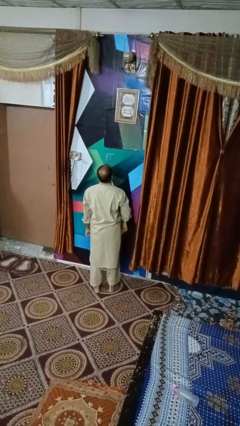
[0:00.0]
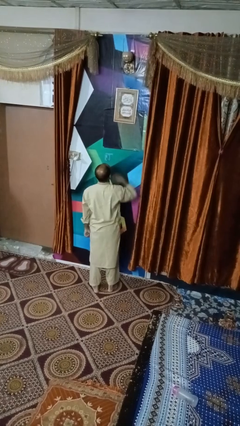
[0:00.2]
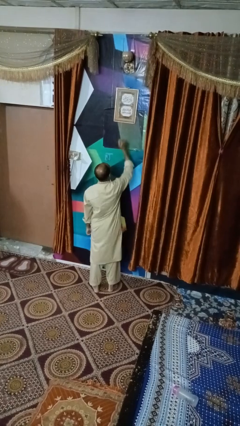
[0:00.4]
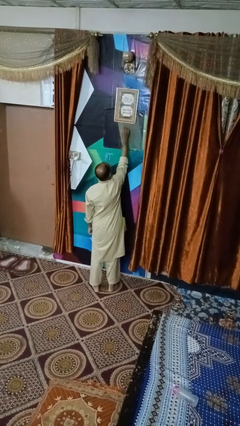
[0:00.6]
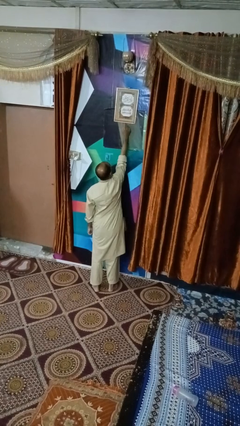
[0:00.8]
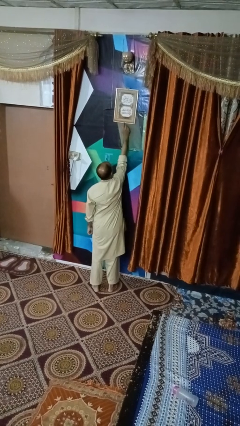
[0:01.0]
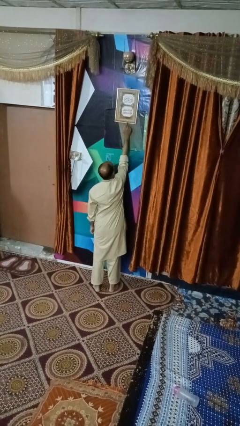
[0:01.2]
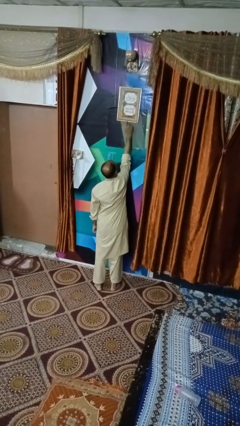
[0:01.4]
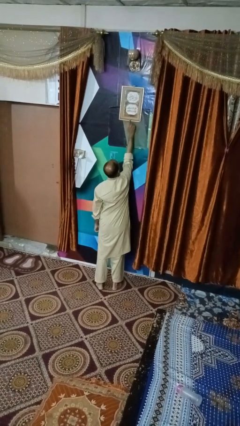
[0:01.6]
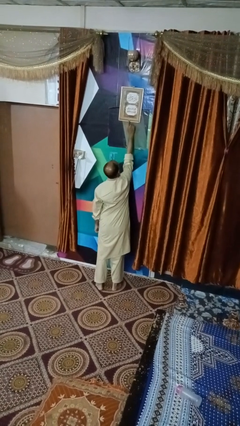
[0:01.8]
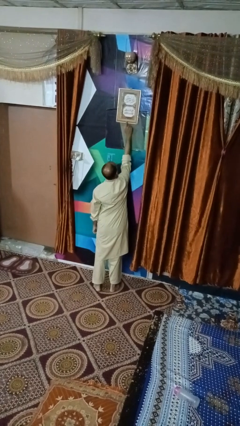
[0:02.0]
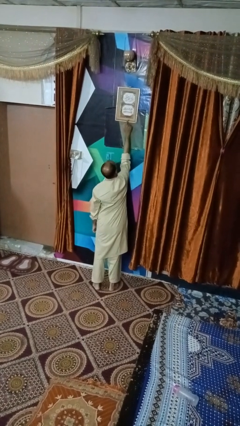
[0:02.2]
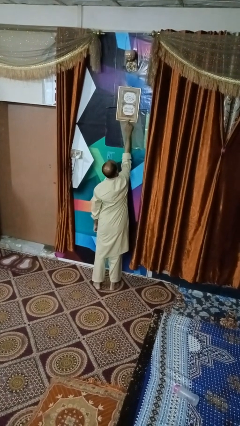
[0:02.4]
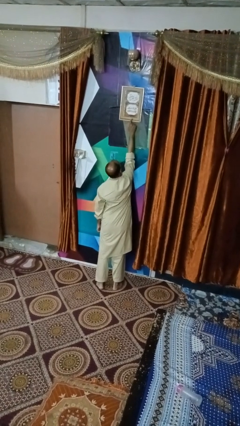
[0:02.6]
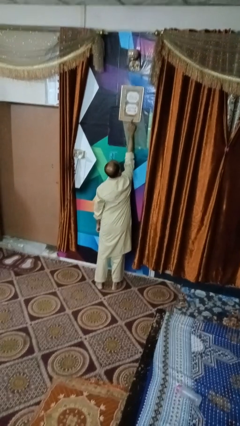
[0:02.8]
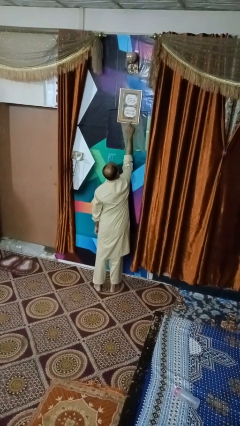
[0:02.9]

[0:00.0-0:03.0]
person taps object with finger

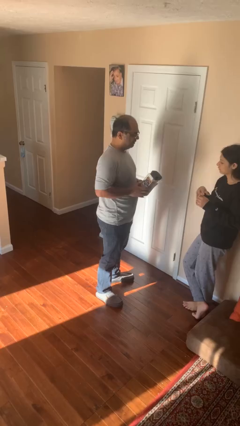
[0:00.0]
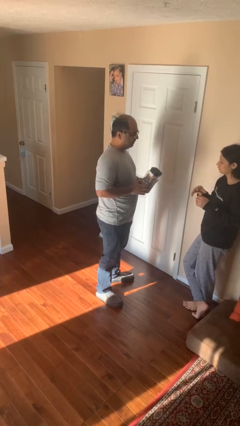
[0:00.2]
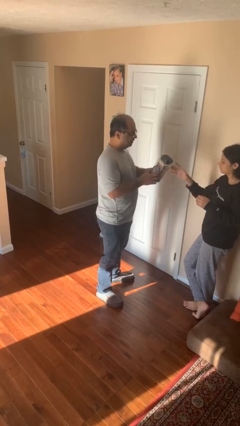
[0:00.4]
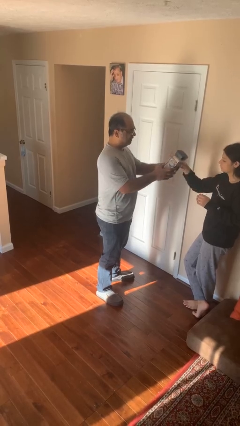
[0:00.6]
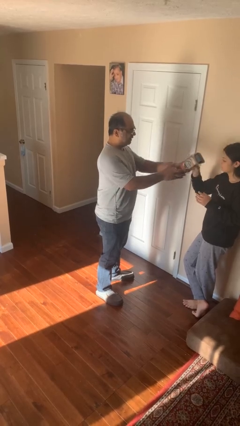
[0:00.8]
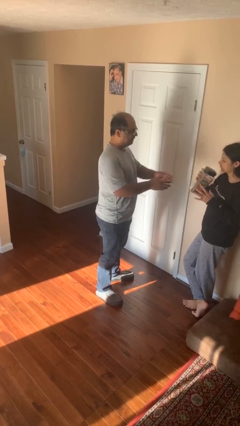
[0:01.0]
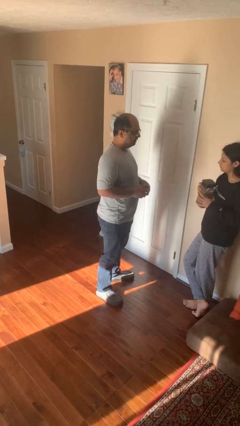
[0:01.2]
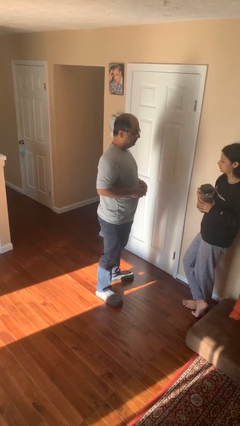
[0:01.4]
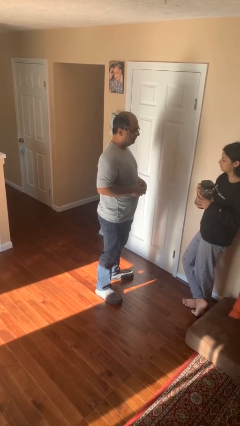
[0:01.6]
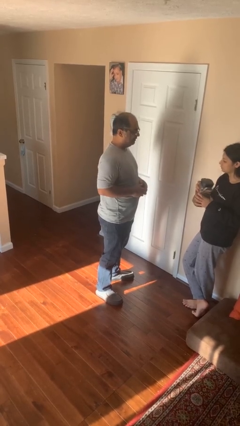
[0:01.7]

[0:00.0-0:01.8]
person transfers object to person

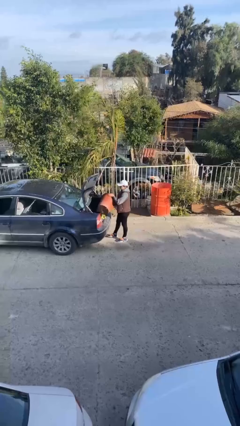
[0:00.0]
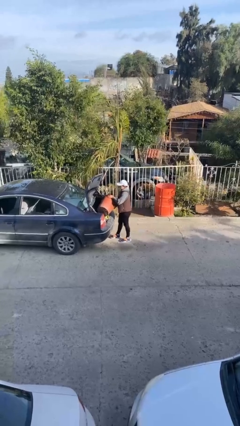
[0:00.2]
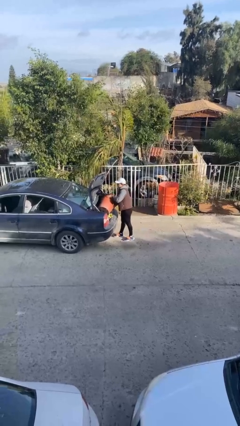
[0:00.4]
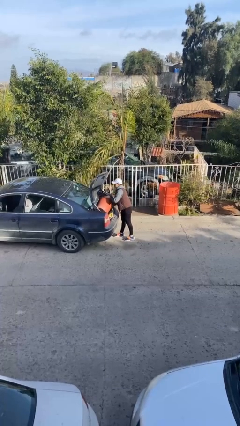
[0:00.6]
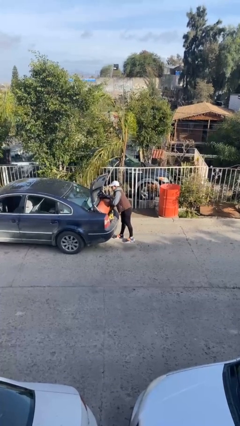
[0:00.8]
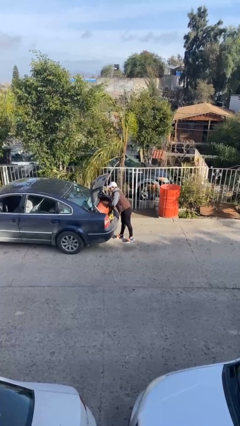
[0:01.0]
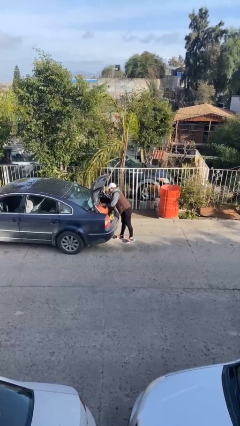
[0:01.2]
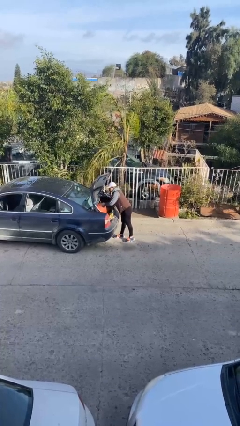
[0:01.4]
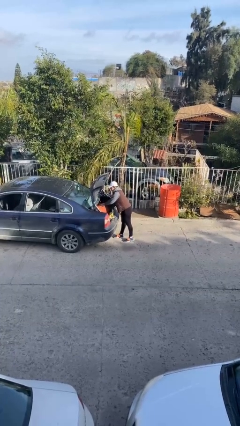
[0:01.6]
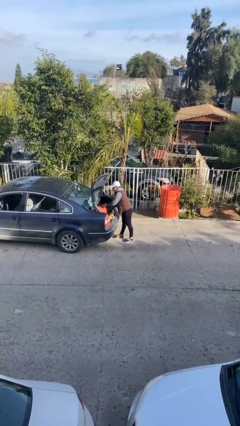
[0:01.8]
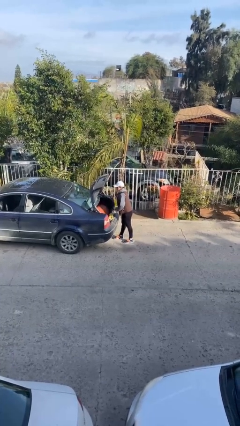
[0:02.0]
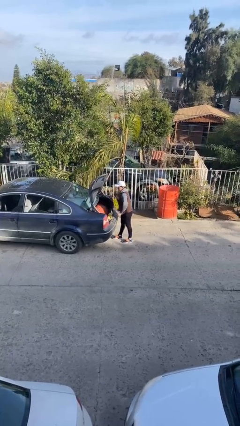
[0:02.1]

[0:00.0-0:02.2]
person loads car

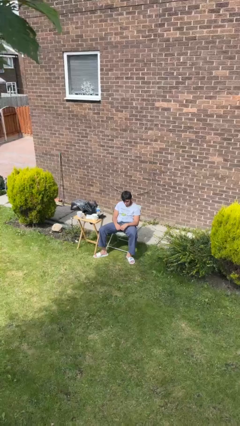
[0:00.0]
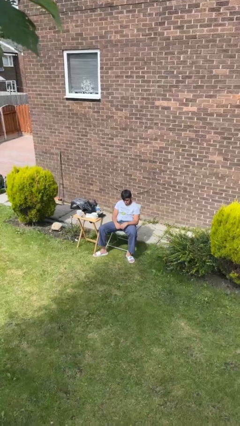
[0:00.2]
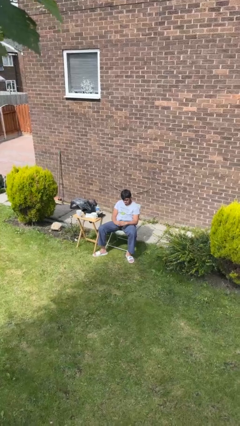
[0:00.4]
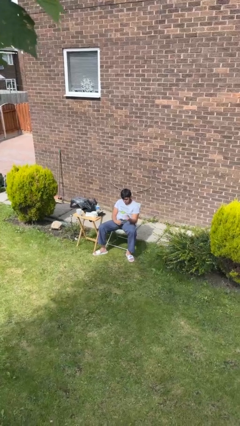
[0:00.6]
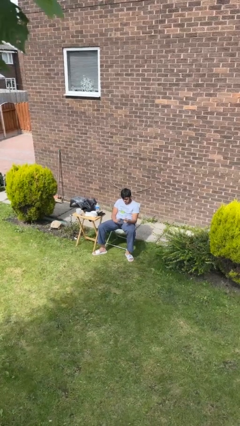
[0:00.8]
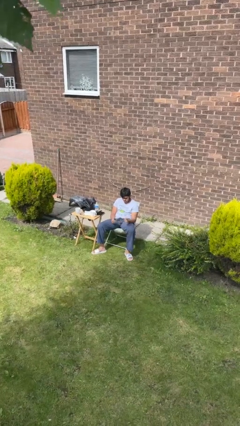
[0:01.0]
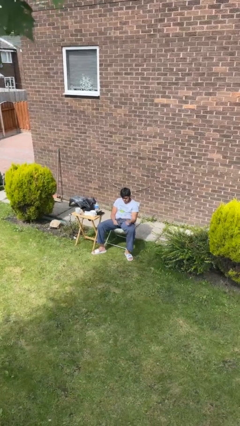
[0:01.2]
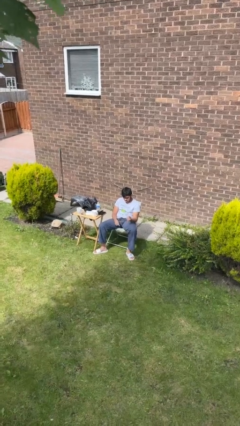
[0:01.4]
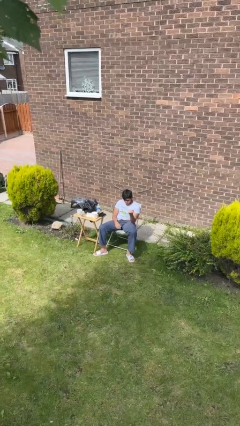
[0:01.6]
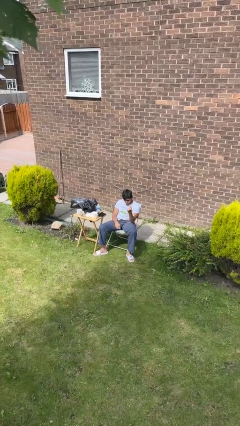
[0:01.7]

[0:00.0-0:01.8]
person snaps fingers

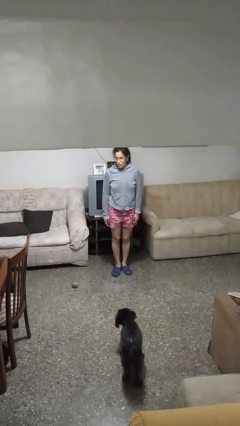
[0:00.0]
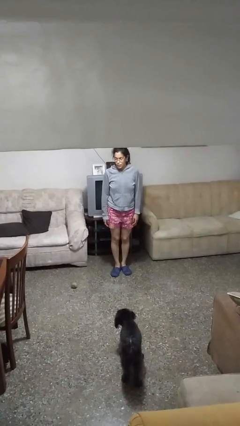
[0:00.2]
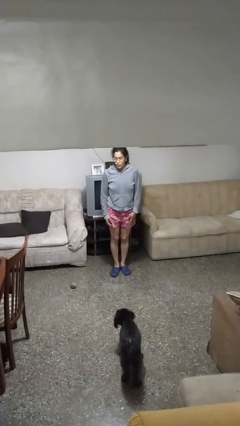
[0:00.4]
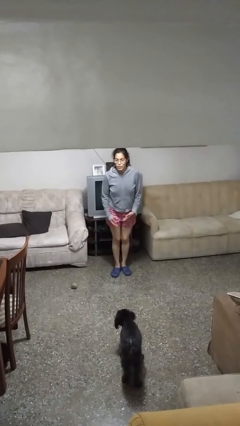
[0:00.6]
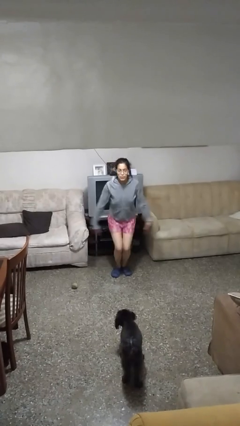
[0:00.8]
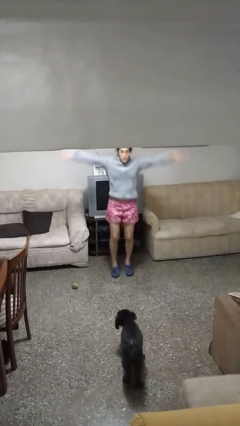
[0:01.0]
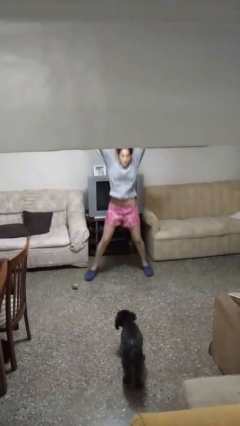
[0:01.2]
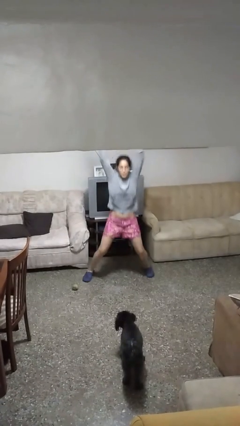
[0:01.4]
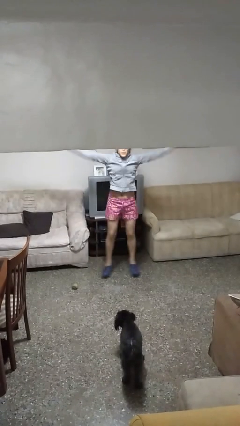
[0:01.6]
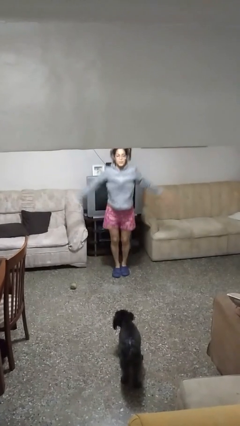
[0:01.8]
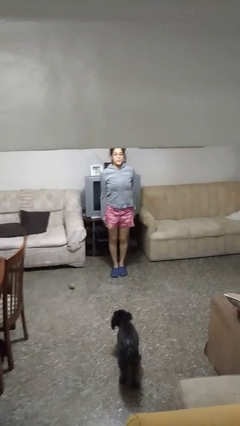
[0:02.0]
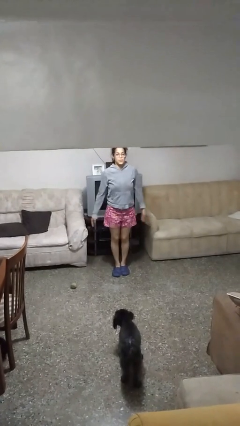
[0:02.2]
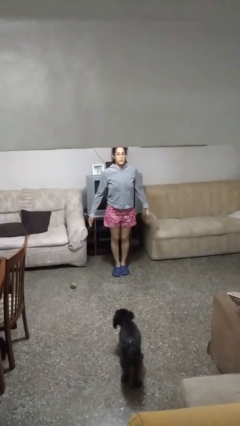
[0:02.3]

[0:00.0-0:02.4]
person exercises with jumping jacks

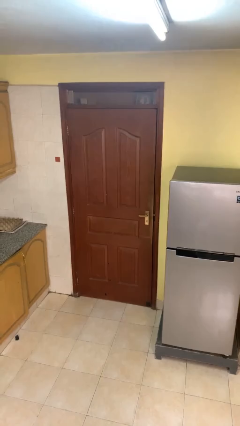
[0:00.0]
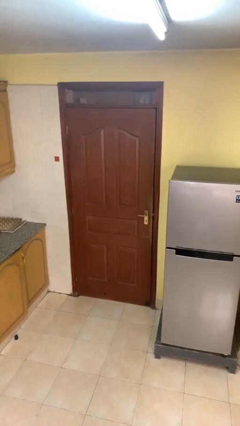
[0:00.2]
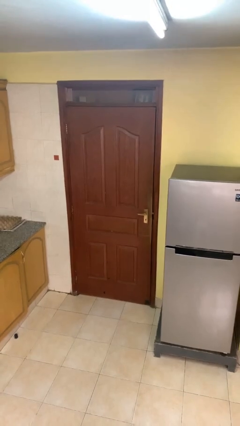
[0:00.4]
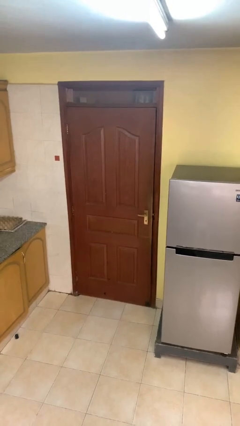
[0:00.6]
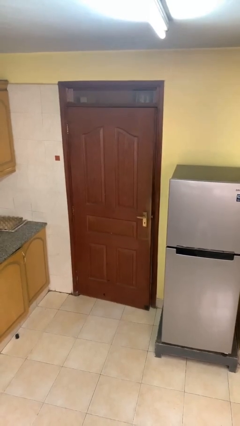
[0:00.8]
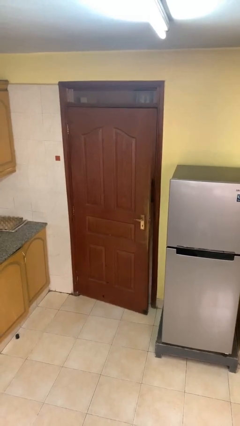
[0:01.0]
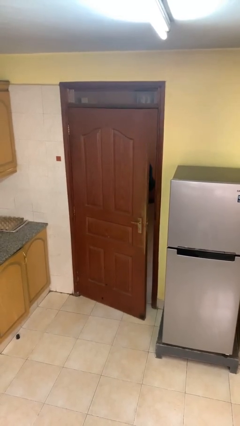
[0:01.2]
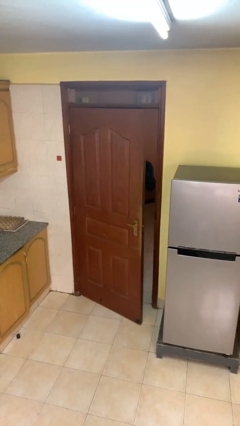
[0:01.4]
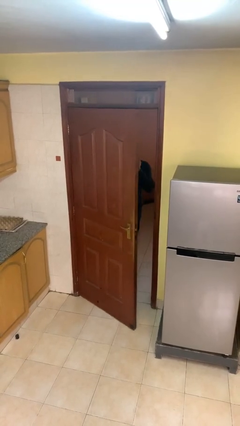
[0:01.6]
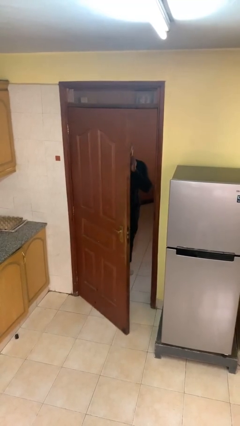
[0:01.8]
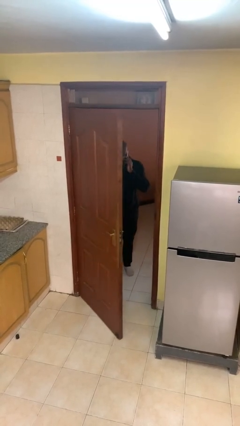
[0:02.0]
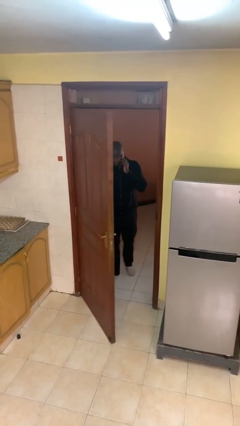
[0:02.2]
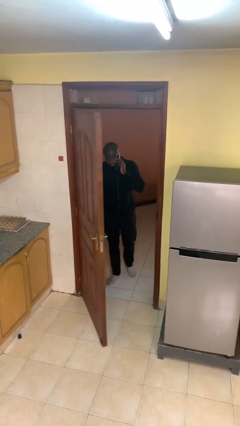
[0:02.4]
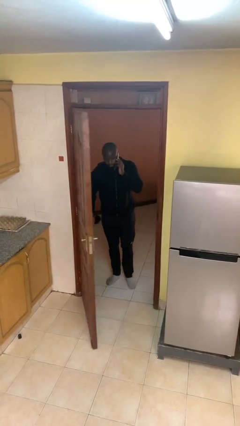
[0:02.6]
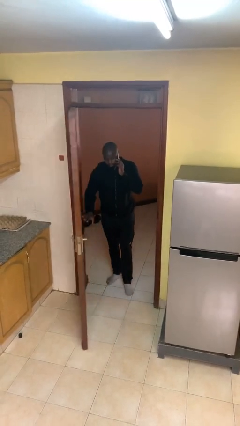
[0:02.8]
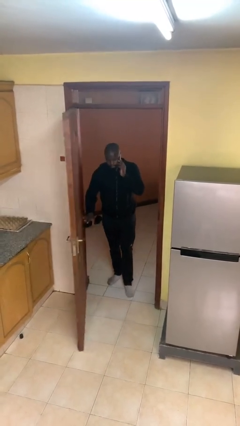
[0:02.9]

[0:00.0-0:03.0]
person opens facility door

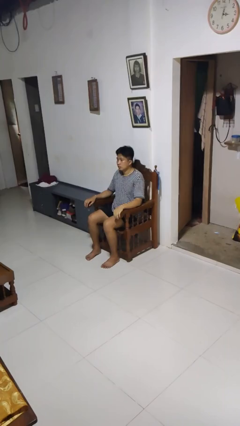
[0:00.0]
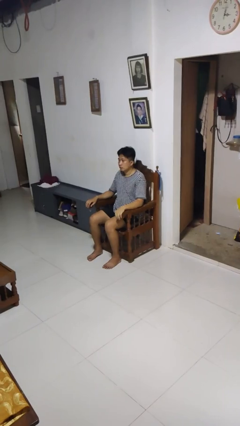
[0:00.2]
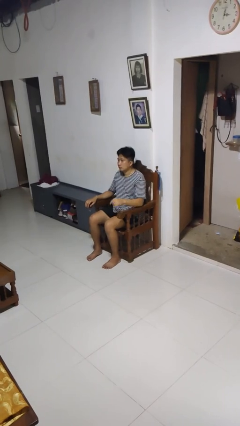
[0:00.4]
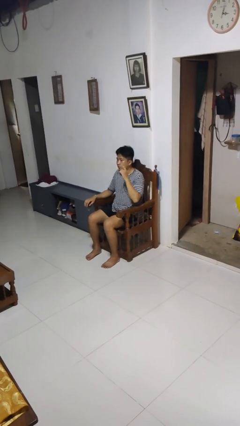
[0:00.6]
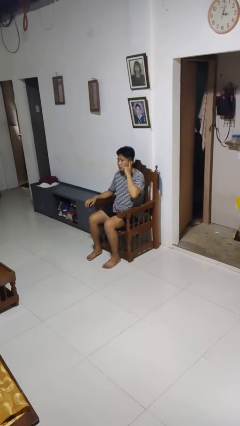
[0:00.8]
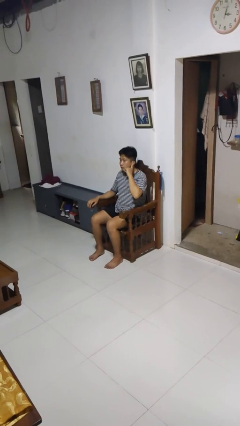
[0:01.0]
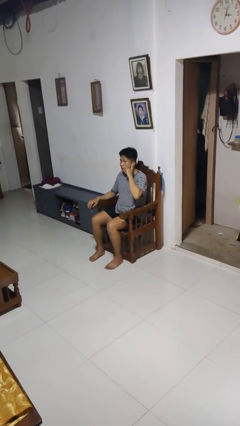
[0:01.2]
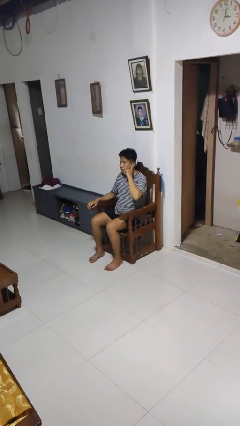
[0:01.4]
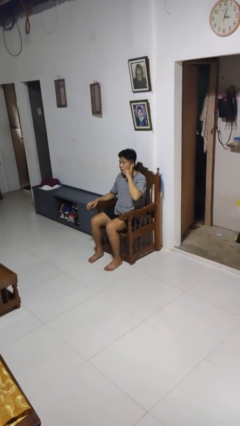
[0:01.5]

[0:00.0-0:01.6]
person gestures listen closely

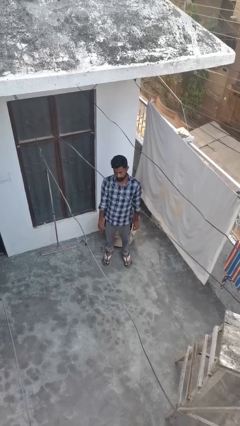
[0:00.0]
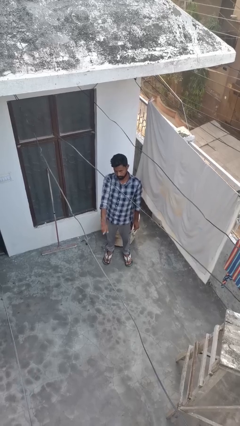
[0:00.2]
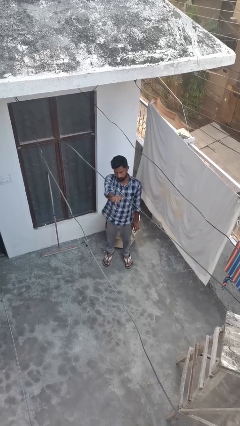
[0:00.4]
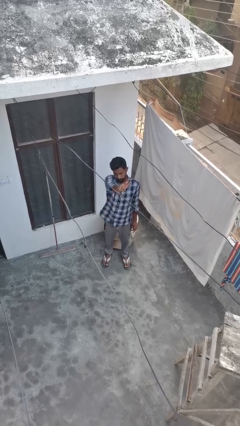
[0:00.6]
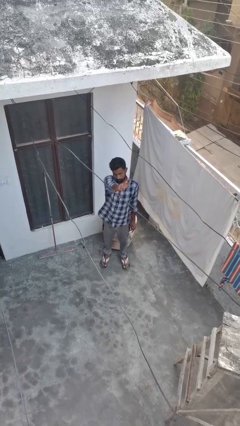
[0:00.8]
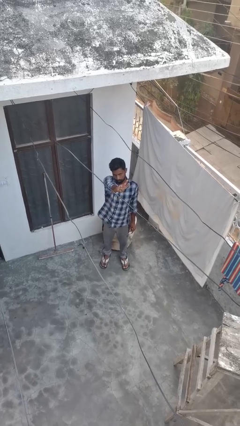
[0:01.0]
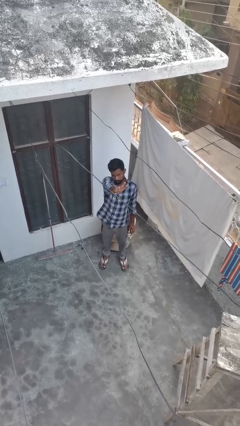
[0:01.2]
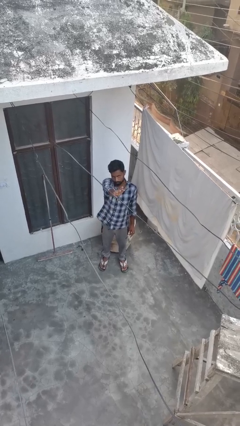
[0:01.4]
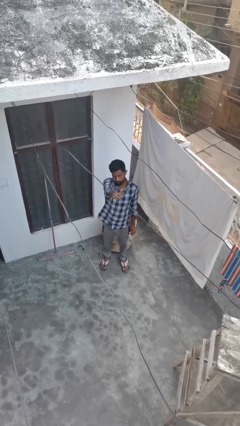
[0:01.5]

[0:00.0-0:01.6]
person gestures number three
